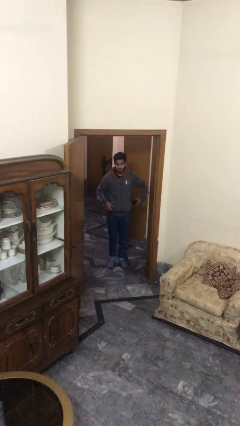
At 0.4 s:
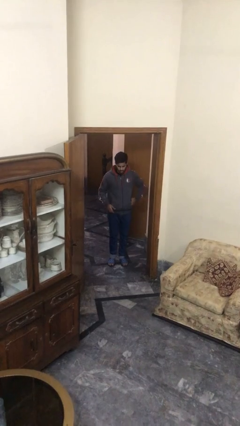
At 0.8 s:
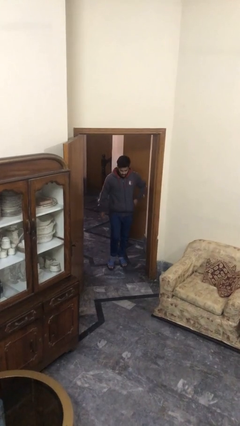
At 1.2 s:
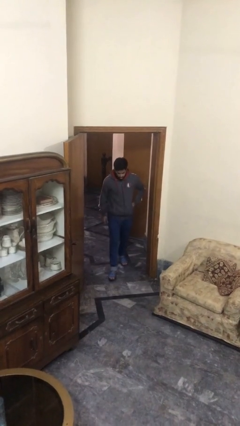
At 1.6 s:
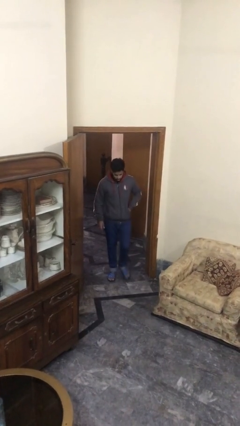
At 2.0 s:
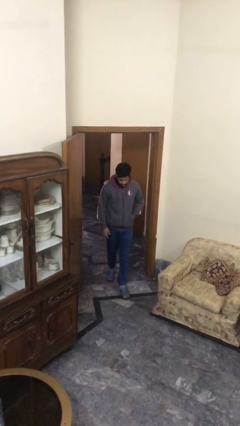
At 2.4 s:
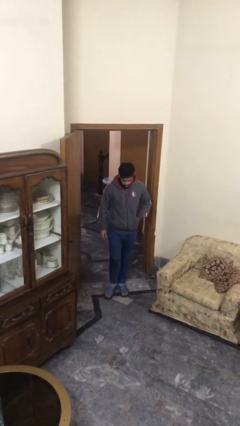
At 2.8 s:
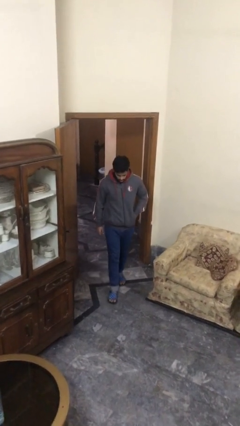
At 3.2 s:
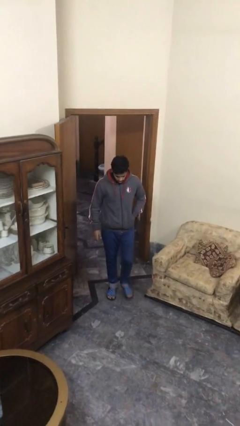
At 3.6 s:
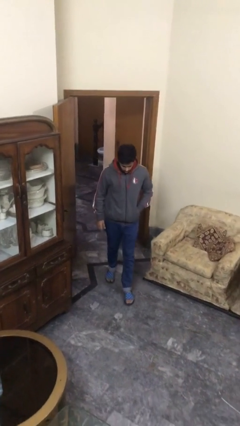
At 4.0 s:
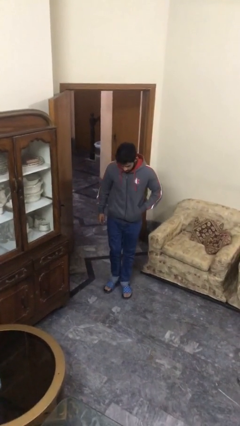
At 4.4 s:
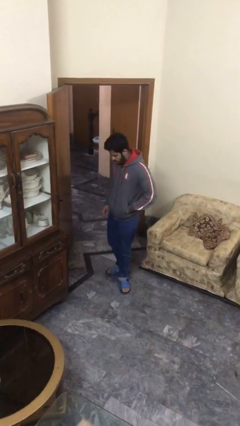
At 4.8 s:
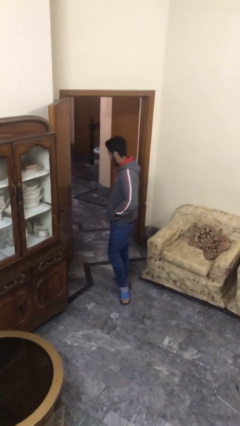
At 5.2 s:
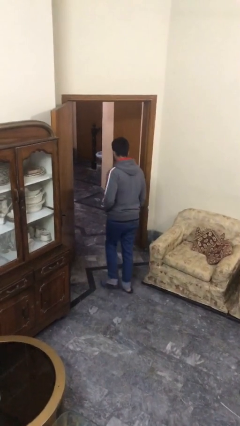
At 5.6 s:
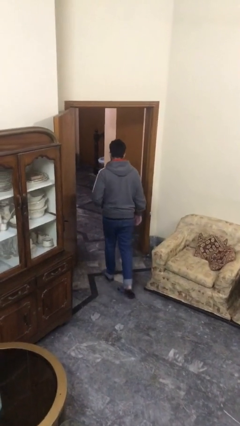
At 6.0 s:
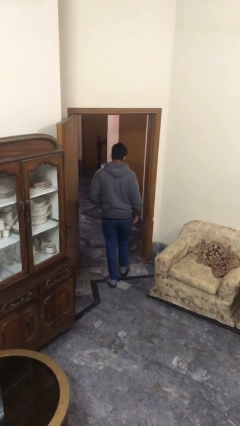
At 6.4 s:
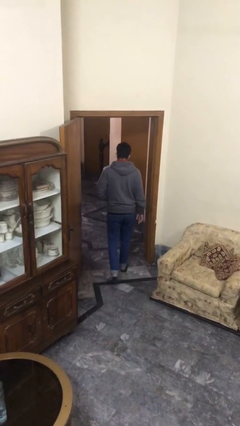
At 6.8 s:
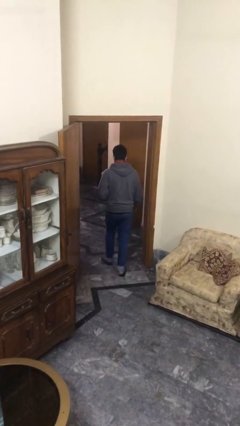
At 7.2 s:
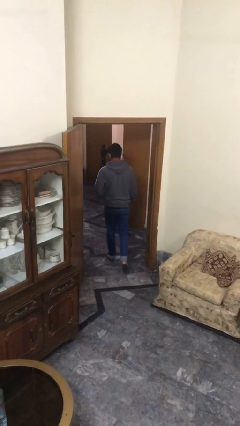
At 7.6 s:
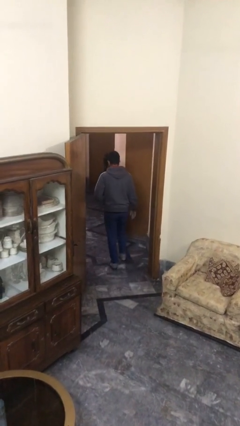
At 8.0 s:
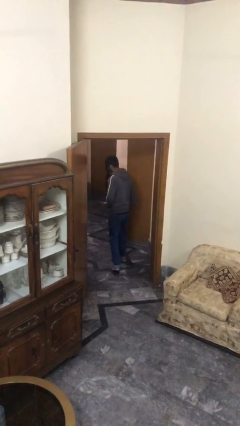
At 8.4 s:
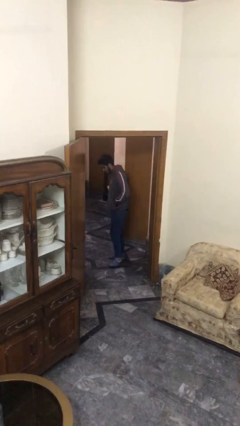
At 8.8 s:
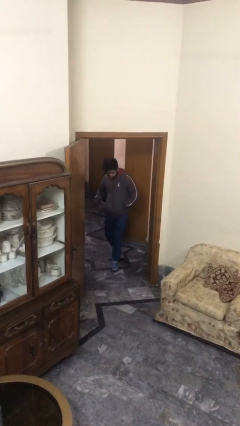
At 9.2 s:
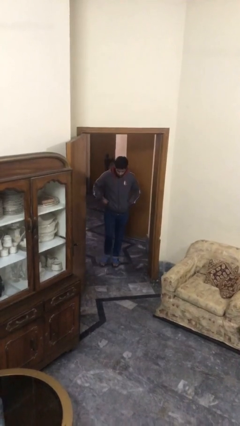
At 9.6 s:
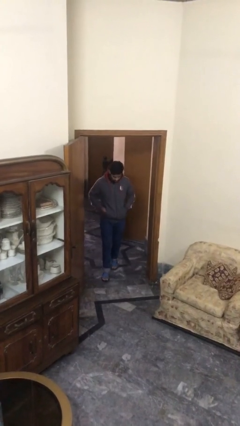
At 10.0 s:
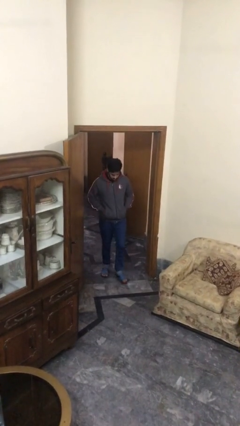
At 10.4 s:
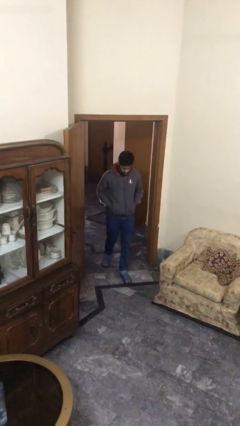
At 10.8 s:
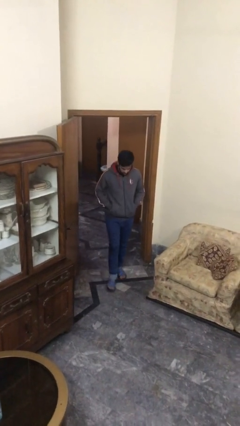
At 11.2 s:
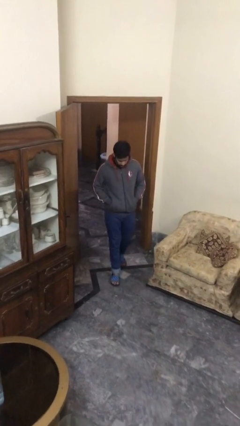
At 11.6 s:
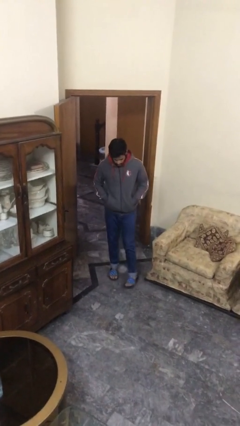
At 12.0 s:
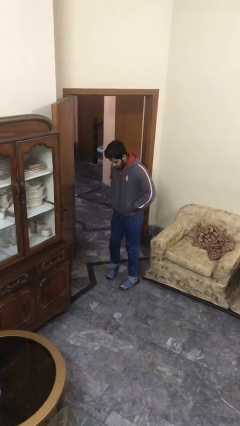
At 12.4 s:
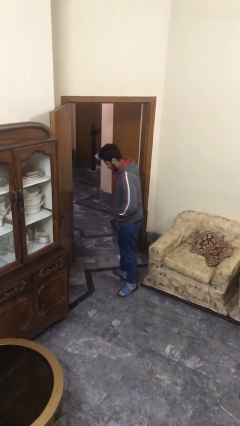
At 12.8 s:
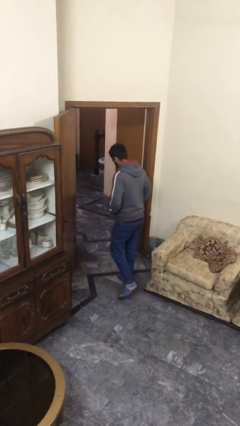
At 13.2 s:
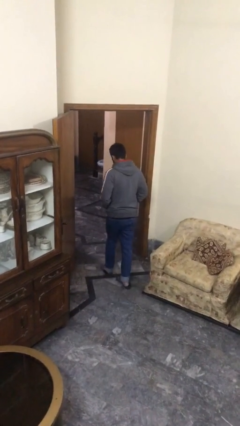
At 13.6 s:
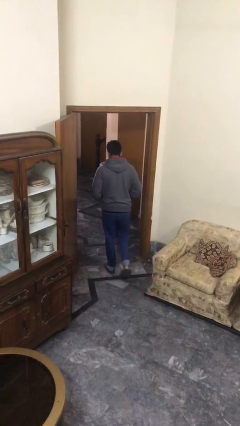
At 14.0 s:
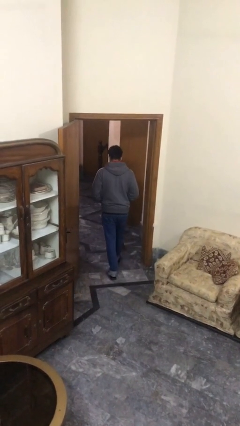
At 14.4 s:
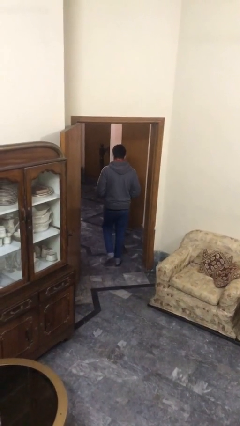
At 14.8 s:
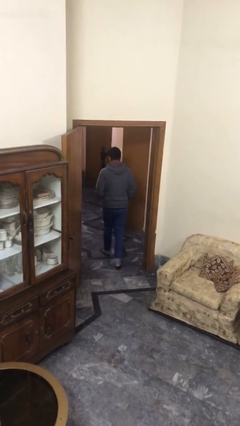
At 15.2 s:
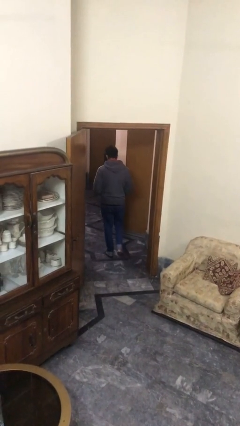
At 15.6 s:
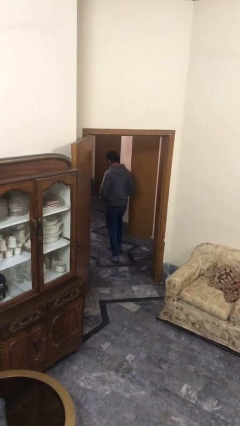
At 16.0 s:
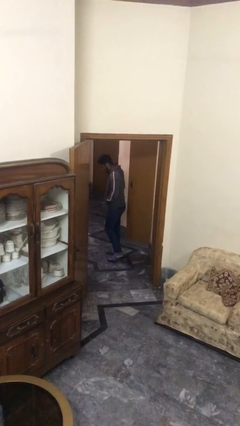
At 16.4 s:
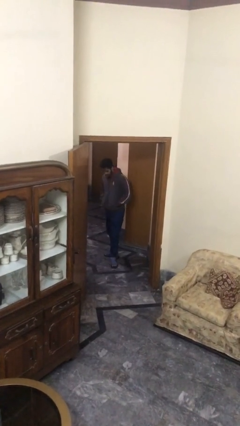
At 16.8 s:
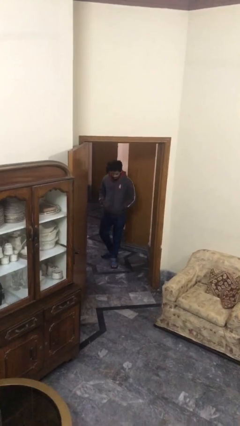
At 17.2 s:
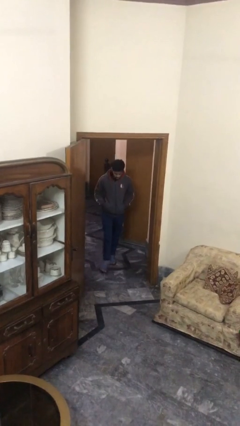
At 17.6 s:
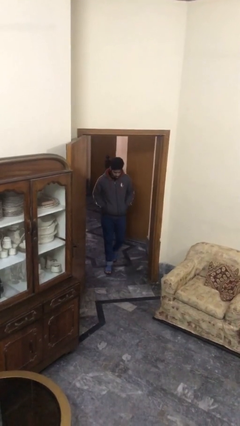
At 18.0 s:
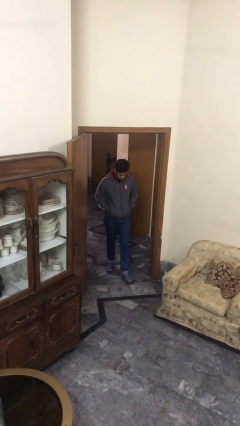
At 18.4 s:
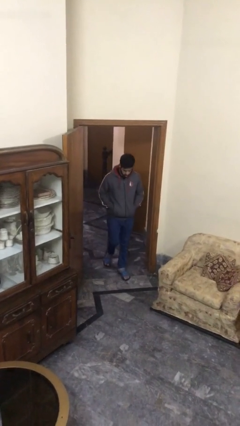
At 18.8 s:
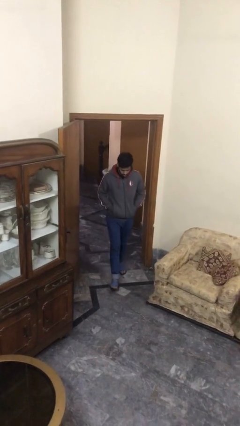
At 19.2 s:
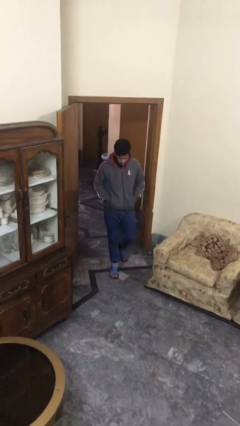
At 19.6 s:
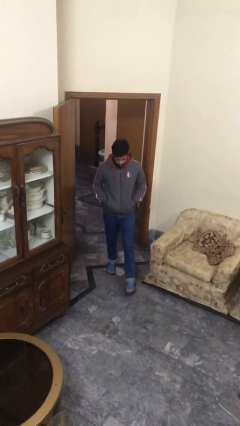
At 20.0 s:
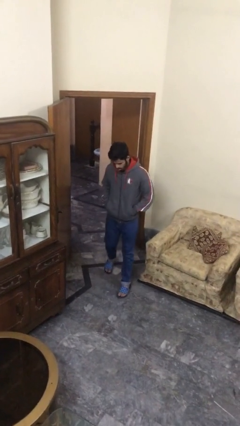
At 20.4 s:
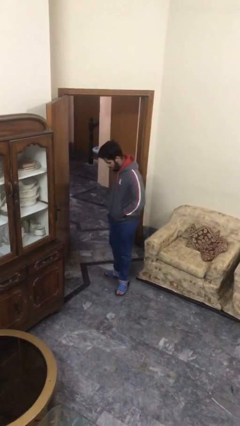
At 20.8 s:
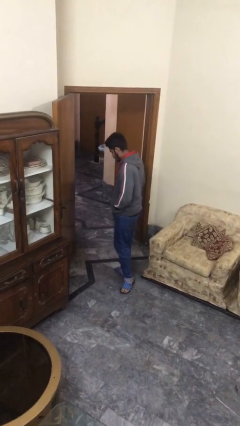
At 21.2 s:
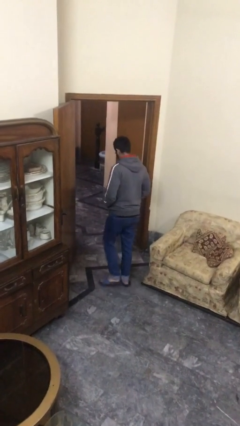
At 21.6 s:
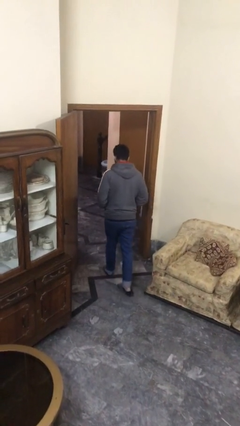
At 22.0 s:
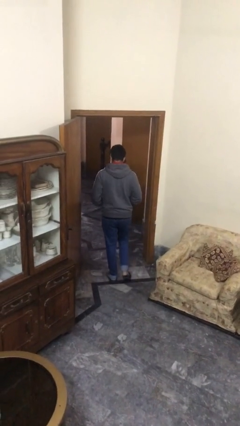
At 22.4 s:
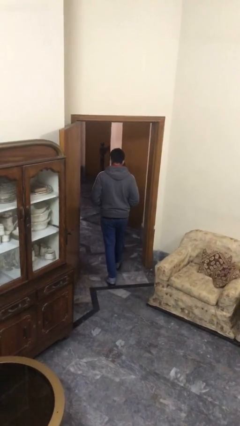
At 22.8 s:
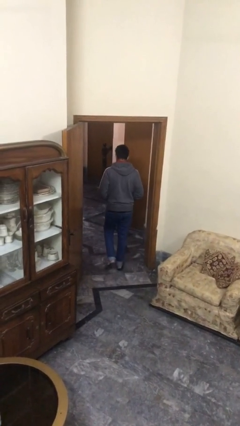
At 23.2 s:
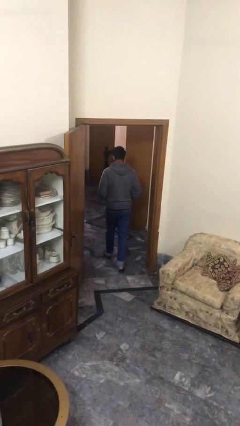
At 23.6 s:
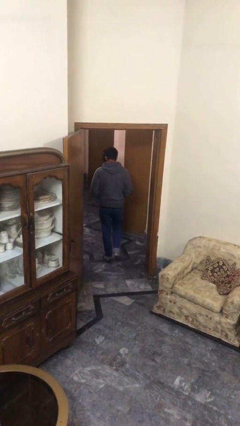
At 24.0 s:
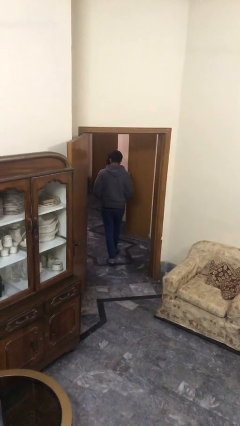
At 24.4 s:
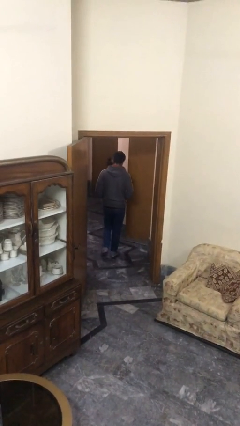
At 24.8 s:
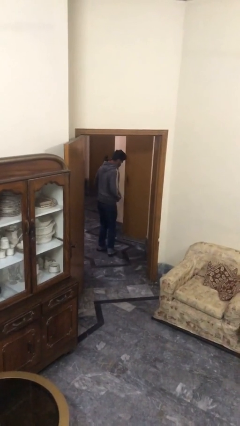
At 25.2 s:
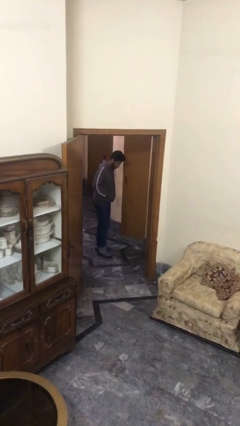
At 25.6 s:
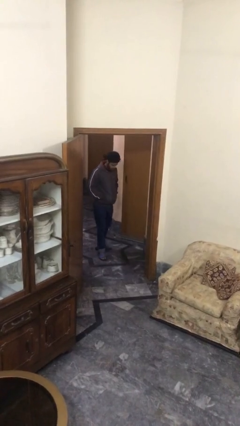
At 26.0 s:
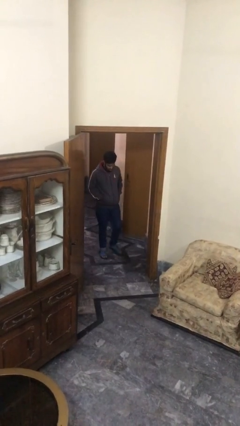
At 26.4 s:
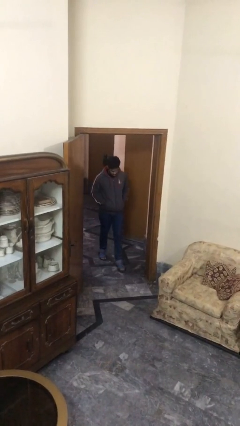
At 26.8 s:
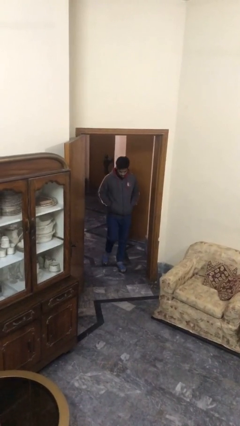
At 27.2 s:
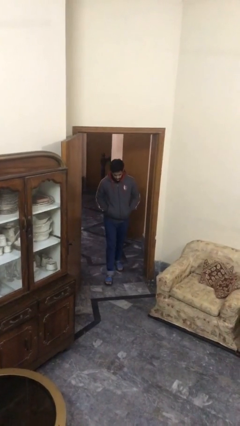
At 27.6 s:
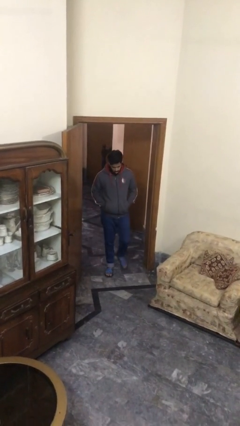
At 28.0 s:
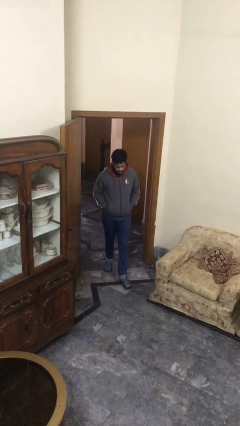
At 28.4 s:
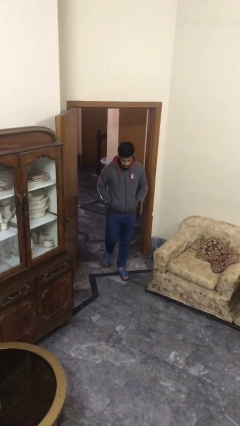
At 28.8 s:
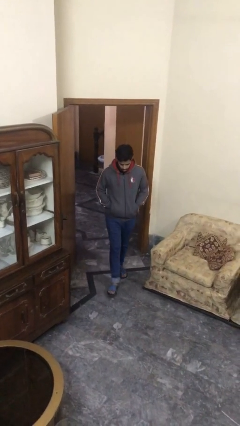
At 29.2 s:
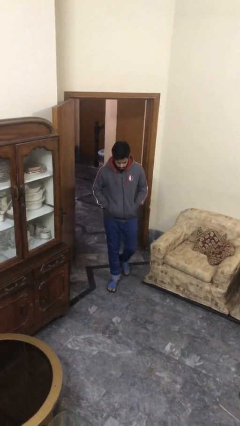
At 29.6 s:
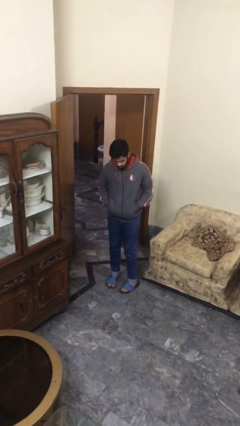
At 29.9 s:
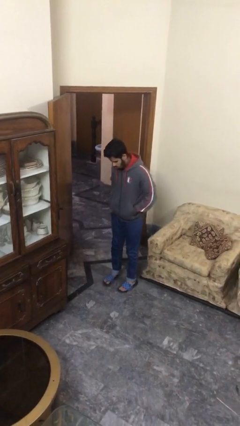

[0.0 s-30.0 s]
person walks

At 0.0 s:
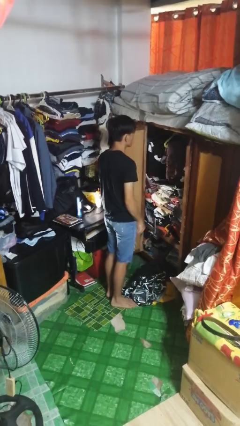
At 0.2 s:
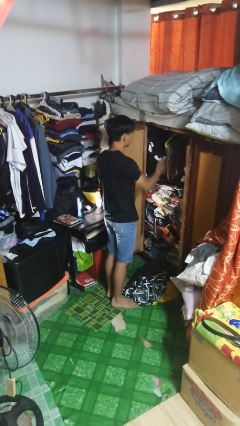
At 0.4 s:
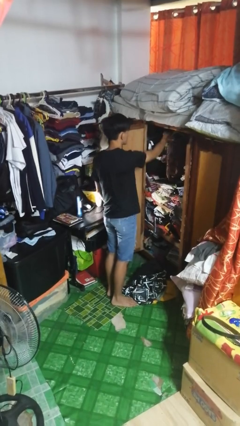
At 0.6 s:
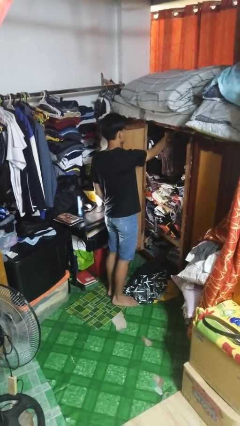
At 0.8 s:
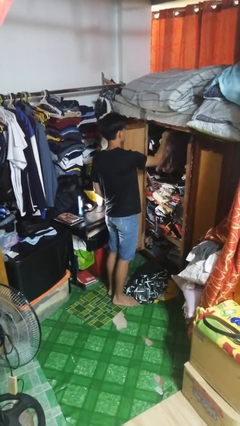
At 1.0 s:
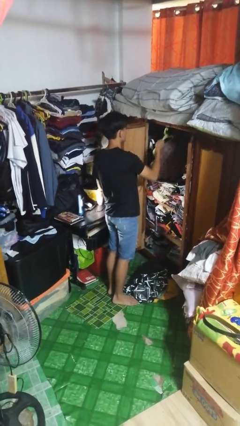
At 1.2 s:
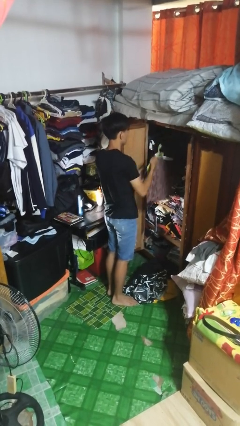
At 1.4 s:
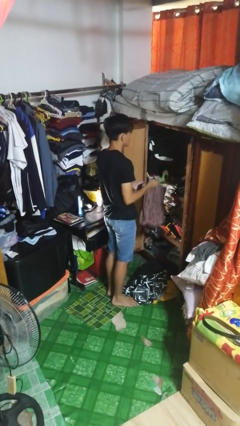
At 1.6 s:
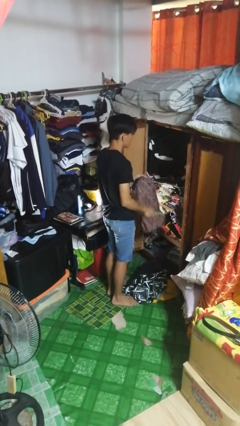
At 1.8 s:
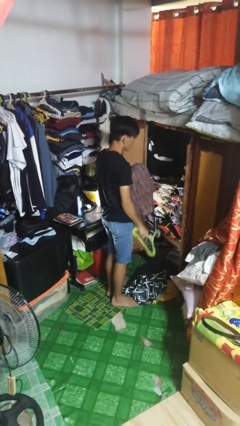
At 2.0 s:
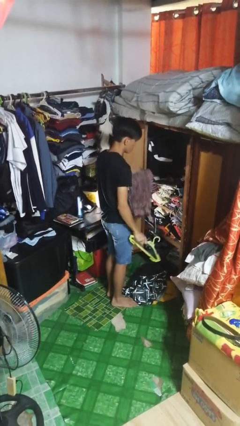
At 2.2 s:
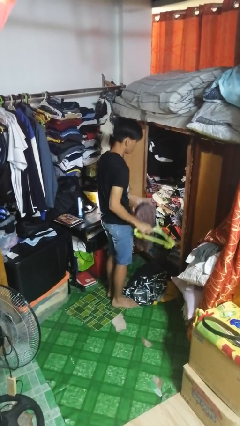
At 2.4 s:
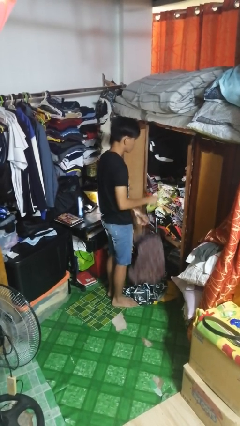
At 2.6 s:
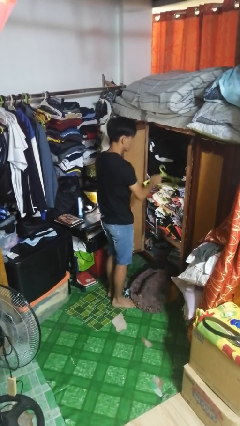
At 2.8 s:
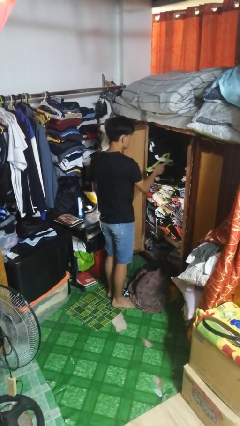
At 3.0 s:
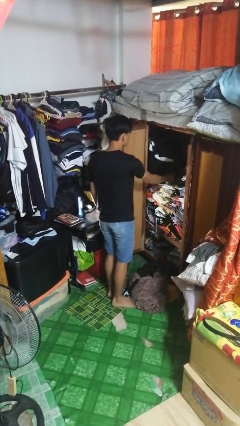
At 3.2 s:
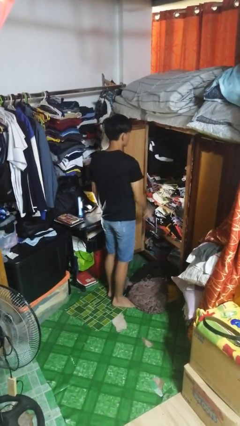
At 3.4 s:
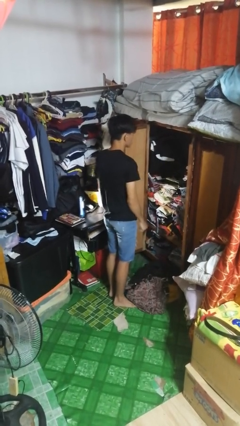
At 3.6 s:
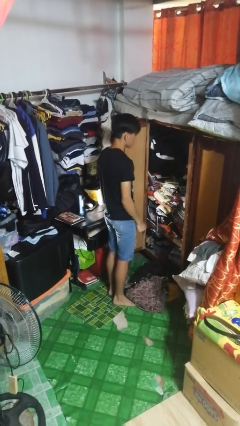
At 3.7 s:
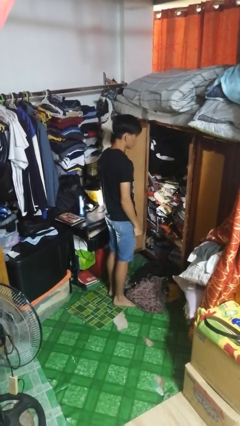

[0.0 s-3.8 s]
person takes clothes from closet
